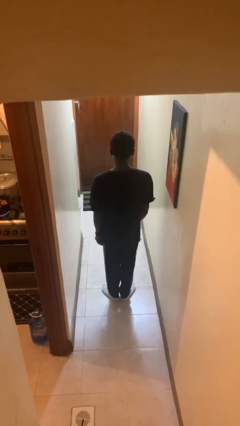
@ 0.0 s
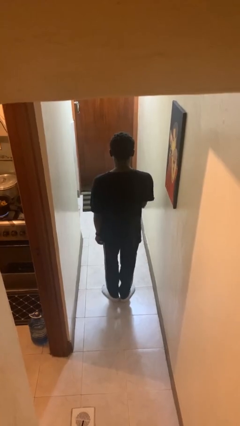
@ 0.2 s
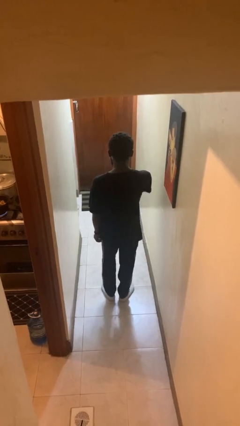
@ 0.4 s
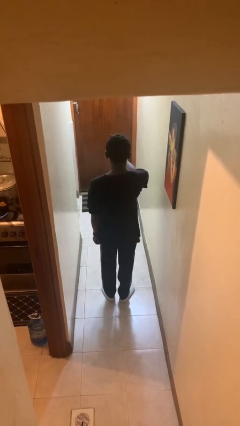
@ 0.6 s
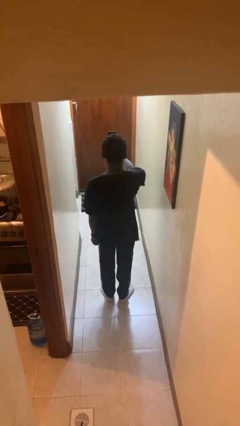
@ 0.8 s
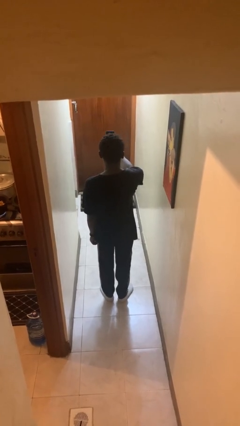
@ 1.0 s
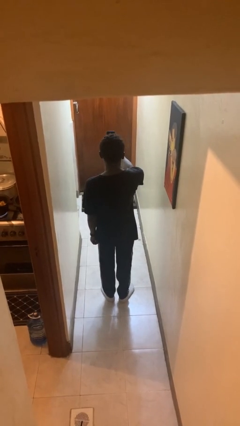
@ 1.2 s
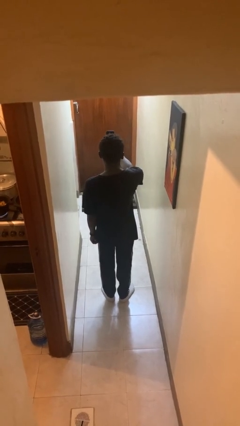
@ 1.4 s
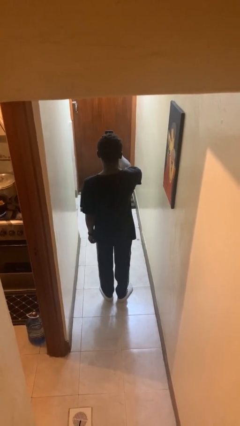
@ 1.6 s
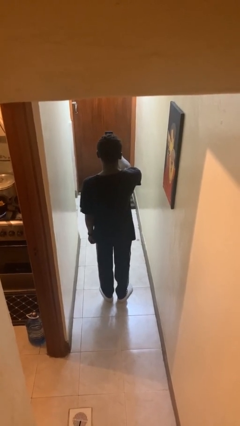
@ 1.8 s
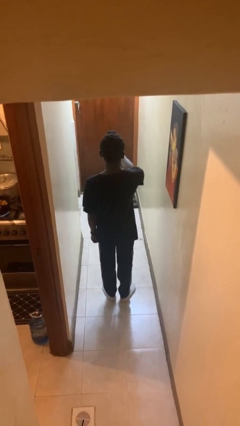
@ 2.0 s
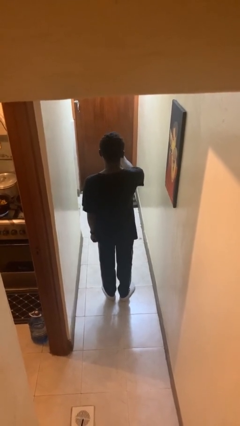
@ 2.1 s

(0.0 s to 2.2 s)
person takes selfie

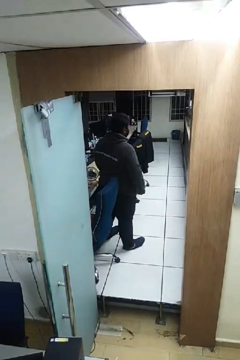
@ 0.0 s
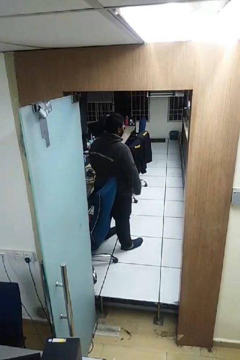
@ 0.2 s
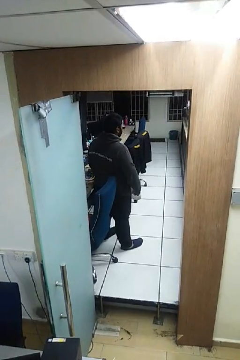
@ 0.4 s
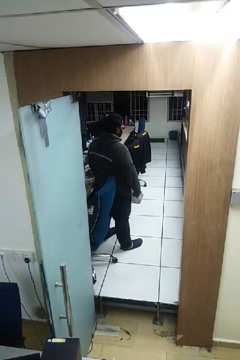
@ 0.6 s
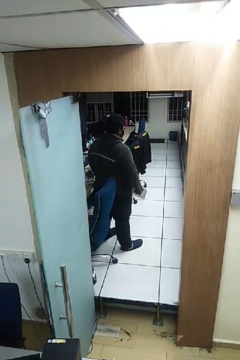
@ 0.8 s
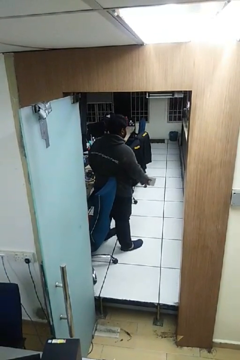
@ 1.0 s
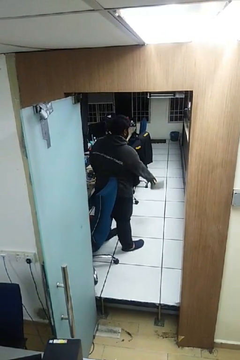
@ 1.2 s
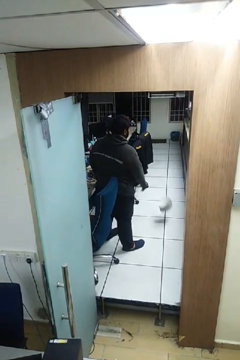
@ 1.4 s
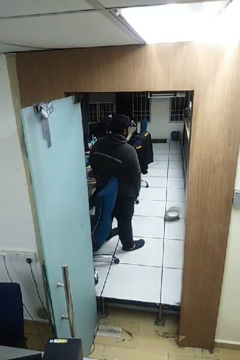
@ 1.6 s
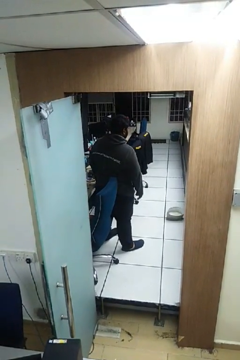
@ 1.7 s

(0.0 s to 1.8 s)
person throws object to ground

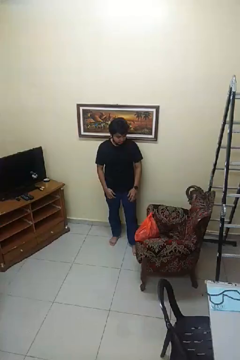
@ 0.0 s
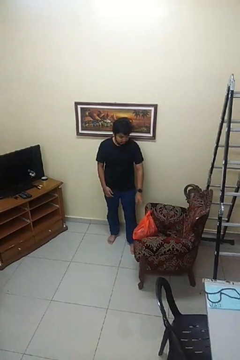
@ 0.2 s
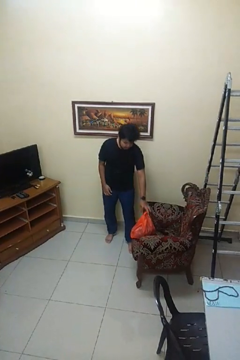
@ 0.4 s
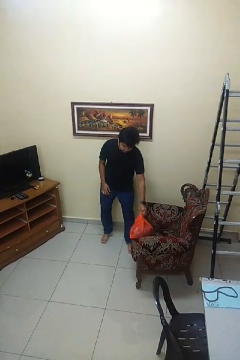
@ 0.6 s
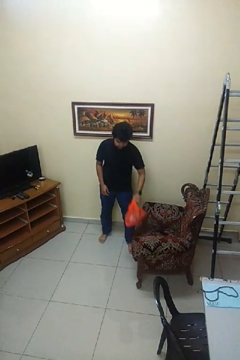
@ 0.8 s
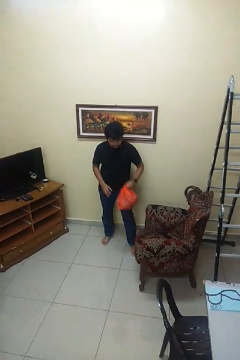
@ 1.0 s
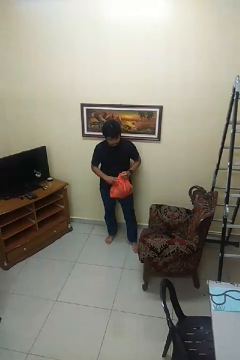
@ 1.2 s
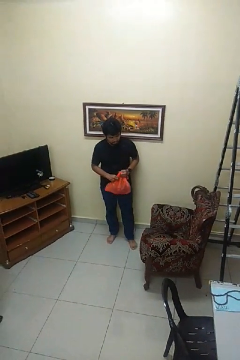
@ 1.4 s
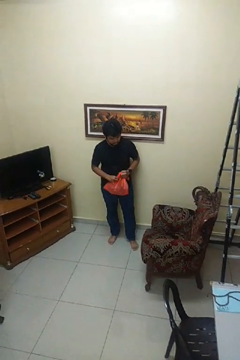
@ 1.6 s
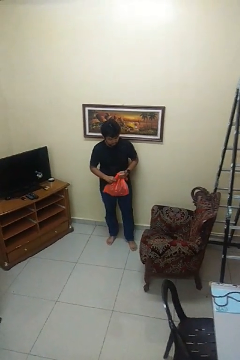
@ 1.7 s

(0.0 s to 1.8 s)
person picks up object from couch

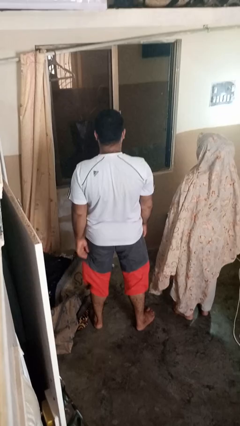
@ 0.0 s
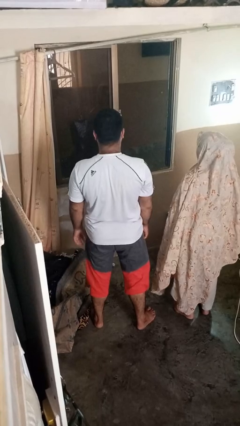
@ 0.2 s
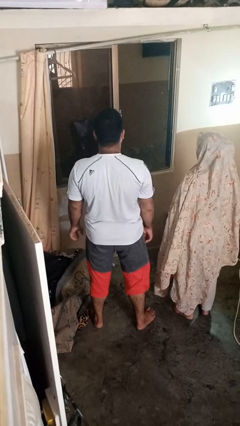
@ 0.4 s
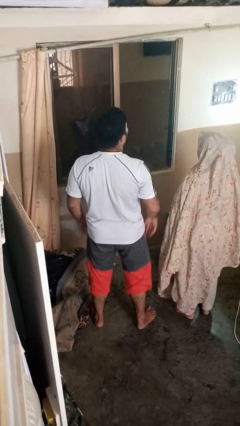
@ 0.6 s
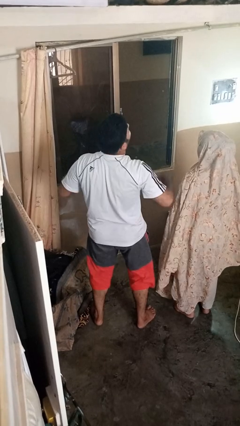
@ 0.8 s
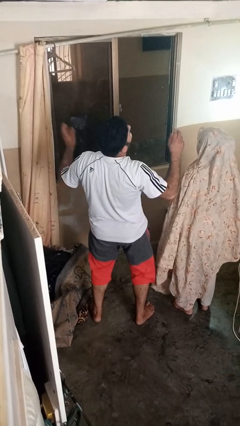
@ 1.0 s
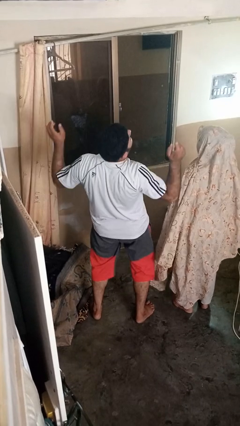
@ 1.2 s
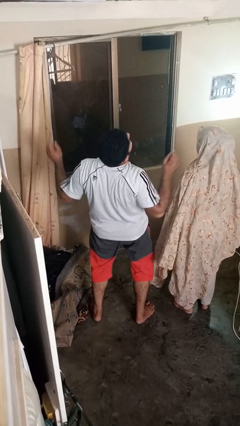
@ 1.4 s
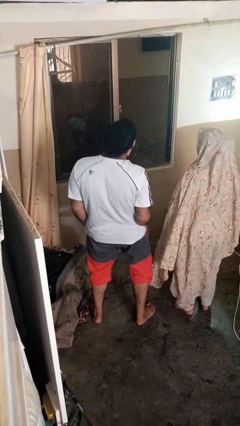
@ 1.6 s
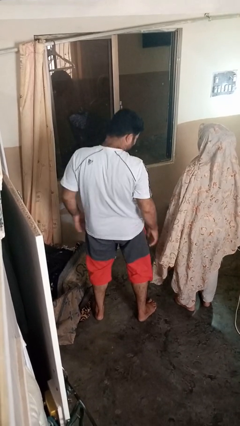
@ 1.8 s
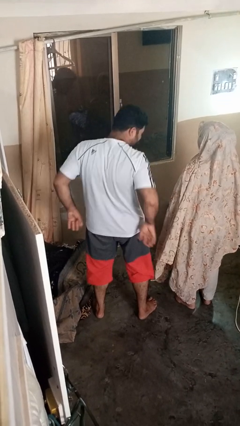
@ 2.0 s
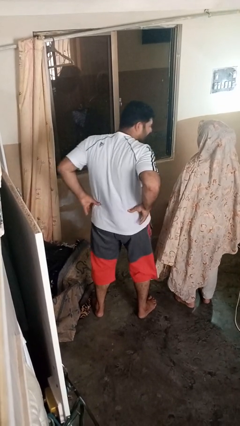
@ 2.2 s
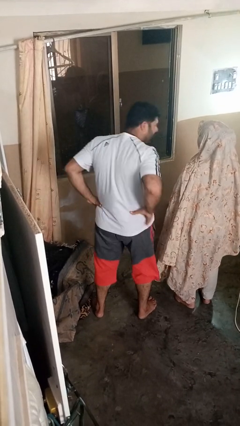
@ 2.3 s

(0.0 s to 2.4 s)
person laughs with person

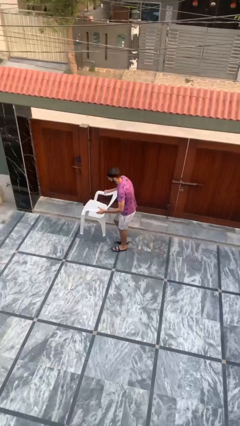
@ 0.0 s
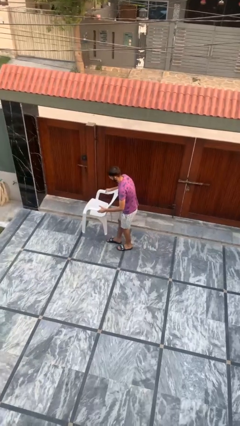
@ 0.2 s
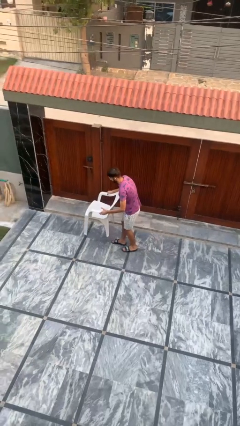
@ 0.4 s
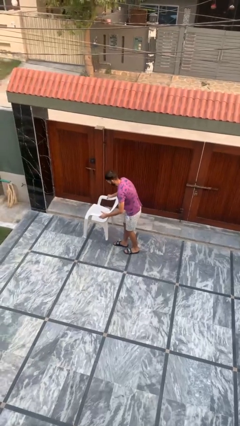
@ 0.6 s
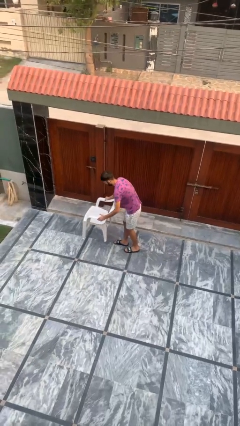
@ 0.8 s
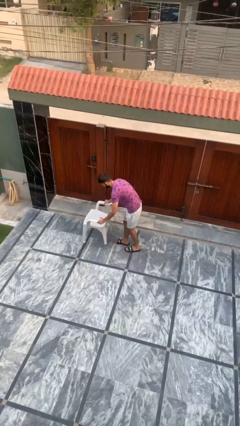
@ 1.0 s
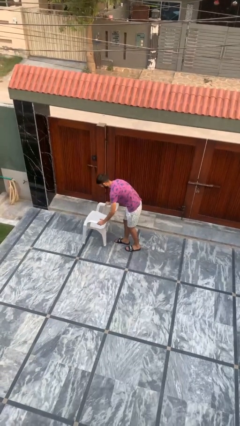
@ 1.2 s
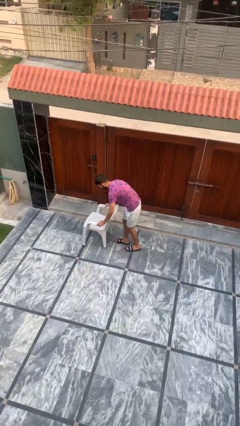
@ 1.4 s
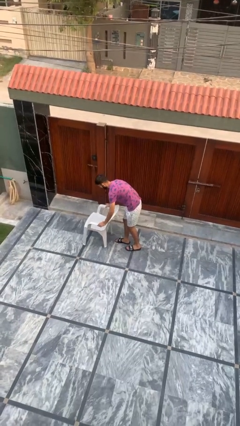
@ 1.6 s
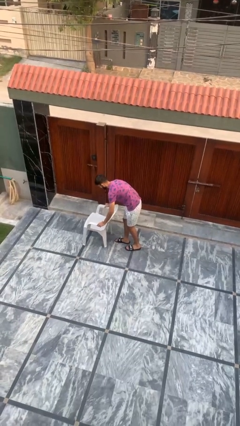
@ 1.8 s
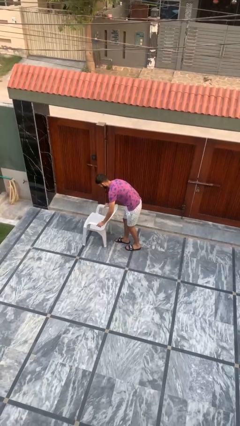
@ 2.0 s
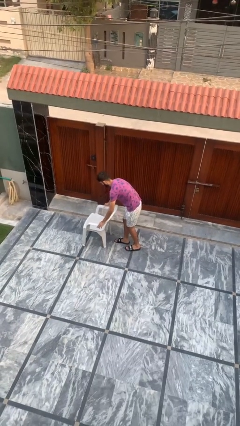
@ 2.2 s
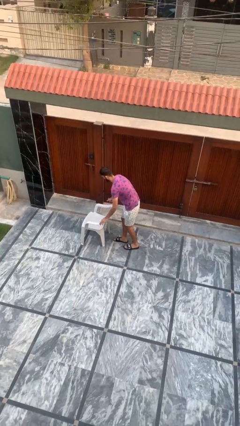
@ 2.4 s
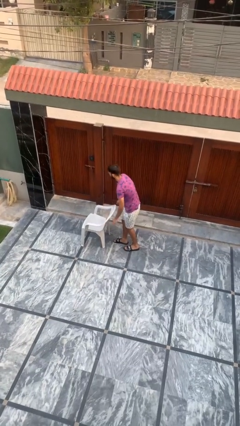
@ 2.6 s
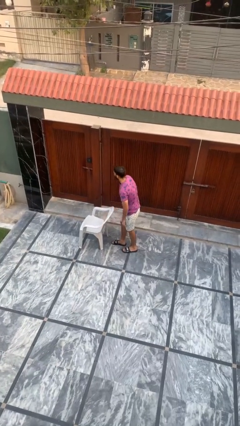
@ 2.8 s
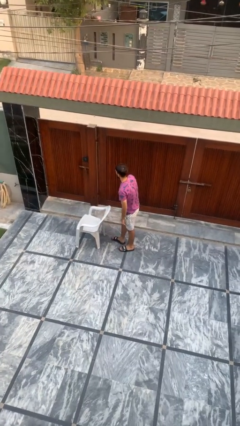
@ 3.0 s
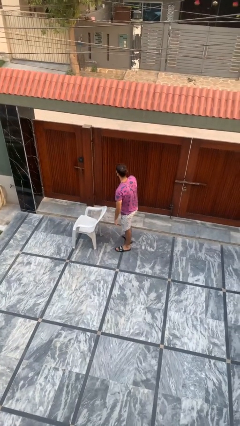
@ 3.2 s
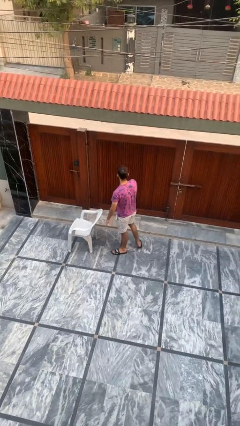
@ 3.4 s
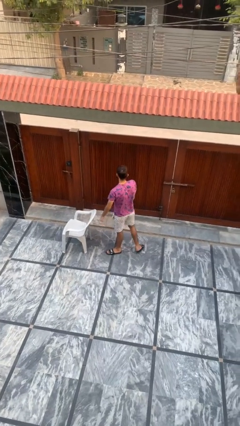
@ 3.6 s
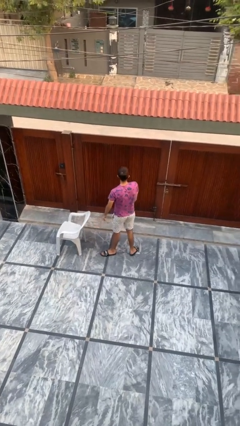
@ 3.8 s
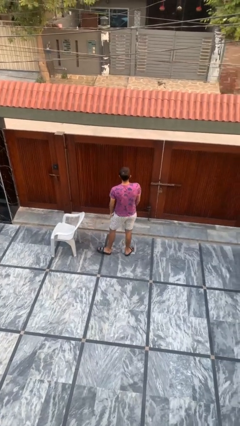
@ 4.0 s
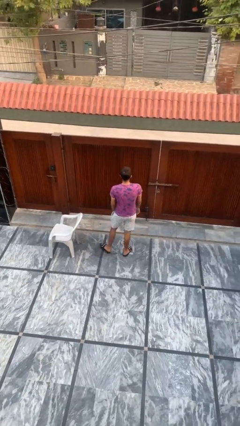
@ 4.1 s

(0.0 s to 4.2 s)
person puts down object on floor

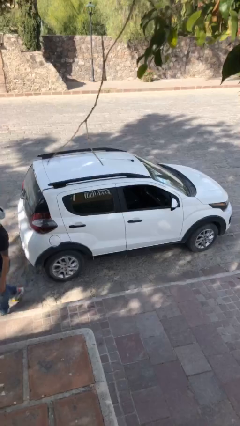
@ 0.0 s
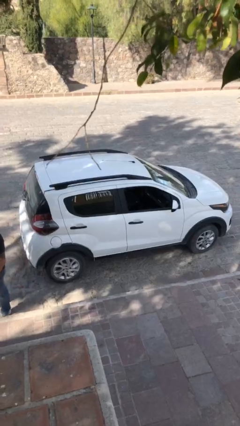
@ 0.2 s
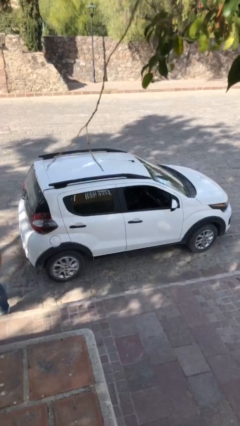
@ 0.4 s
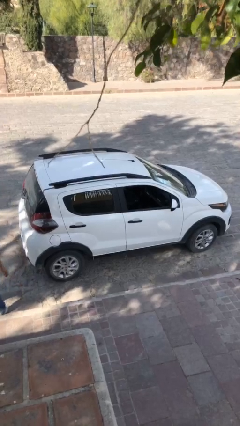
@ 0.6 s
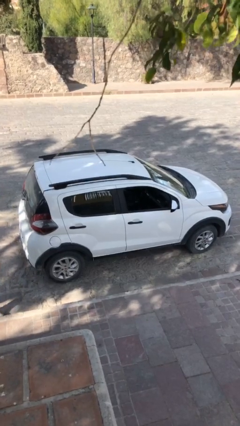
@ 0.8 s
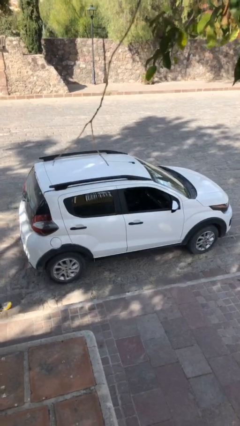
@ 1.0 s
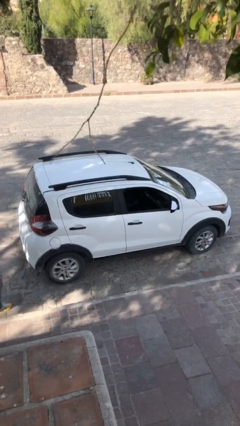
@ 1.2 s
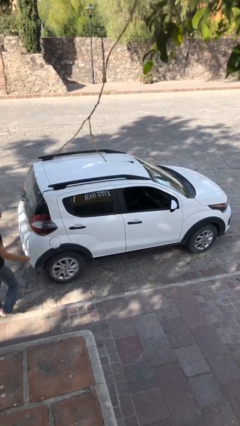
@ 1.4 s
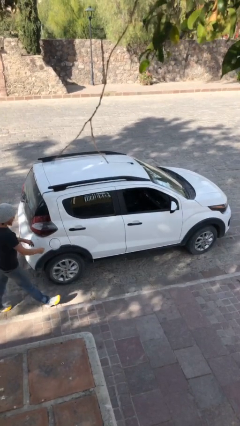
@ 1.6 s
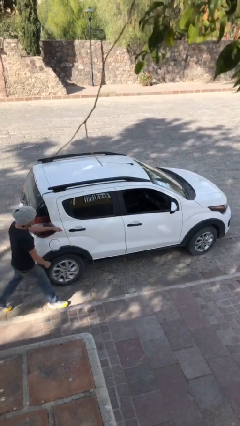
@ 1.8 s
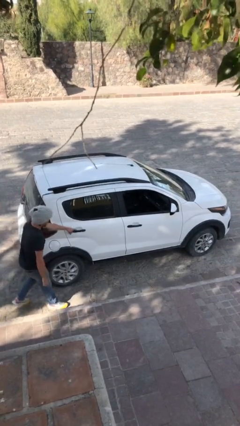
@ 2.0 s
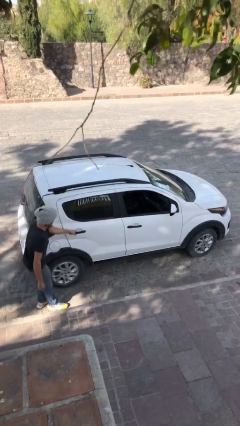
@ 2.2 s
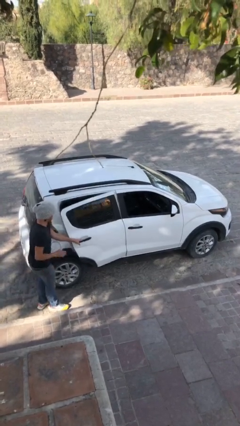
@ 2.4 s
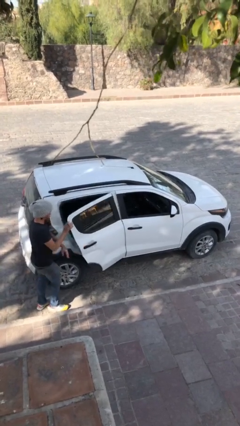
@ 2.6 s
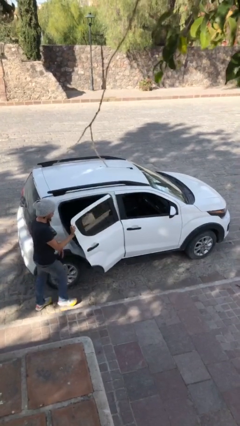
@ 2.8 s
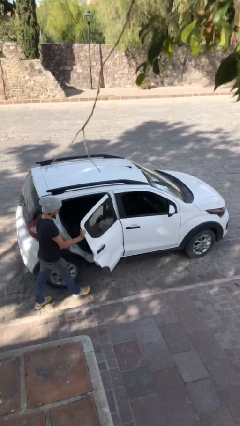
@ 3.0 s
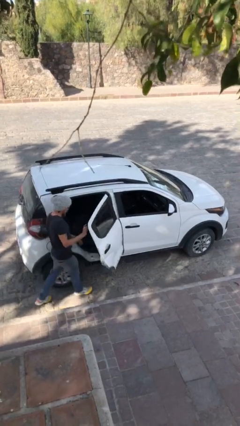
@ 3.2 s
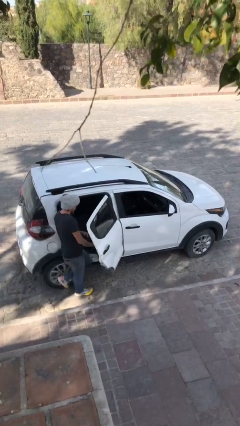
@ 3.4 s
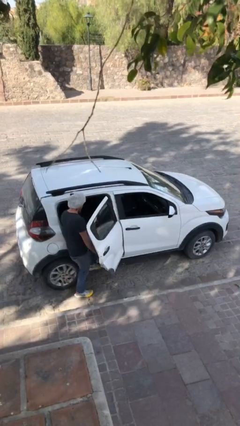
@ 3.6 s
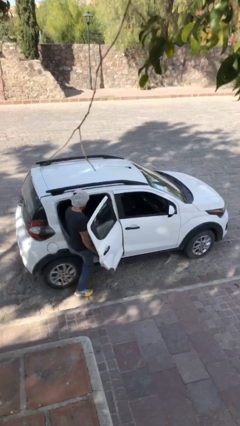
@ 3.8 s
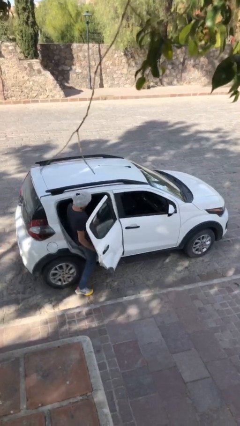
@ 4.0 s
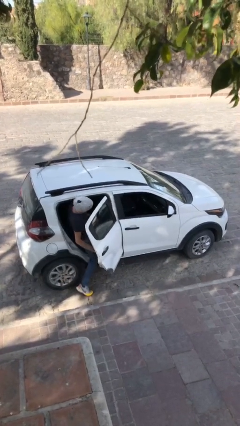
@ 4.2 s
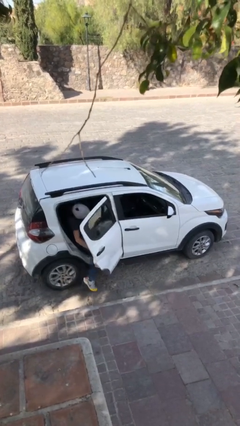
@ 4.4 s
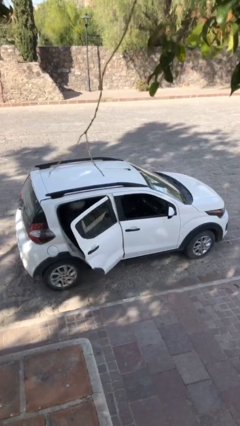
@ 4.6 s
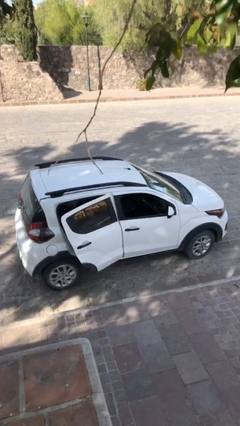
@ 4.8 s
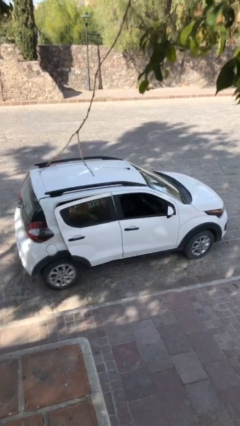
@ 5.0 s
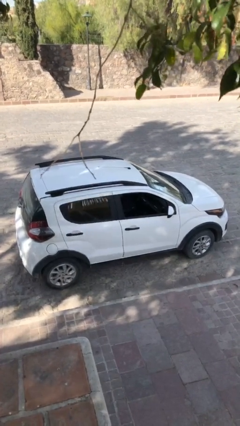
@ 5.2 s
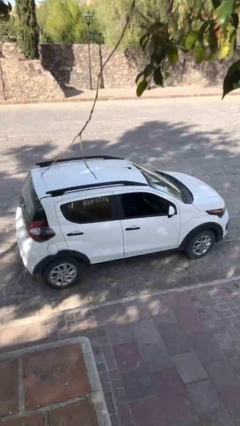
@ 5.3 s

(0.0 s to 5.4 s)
car picks up person

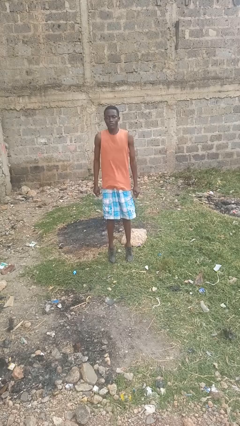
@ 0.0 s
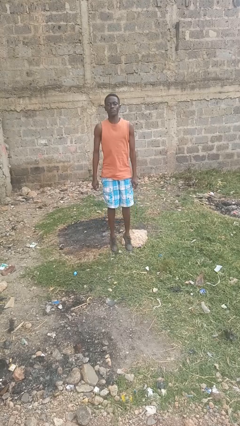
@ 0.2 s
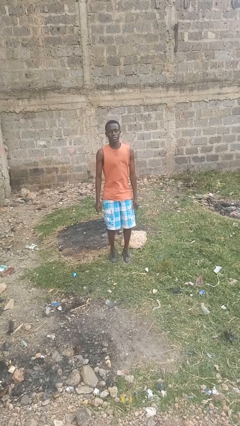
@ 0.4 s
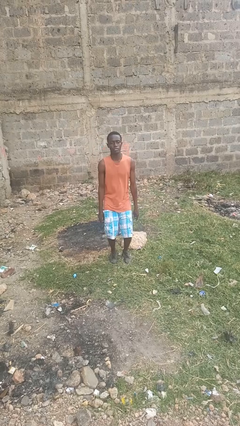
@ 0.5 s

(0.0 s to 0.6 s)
person jumps
